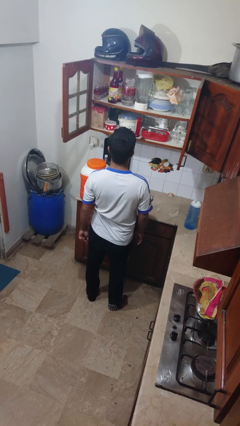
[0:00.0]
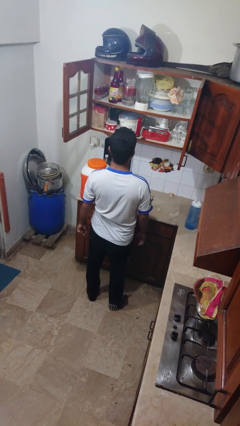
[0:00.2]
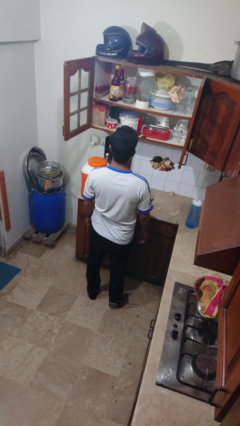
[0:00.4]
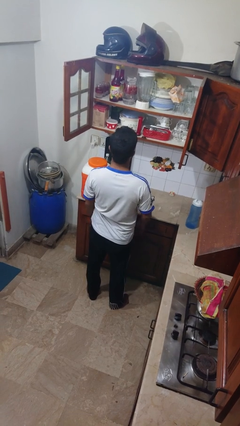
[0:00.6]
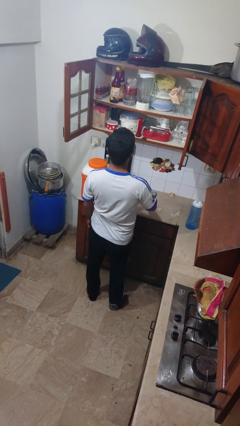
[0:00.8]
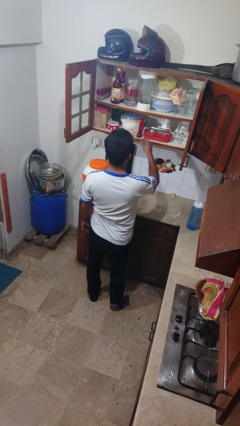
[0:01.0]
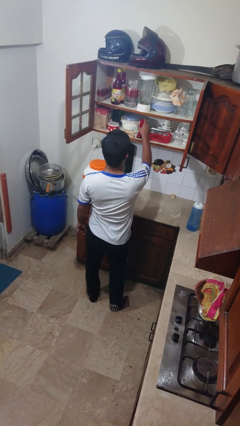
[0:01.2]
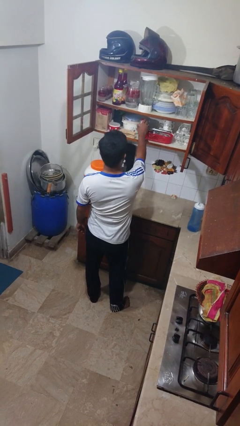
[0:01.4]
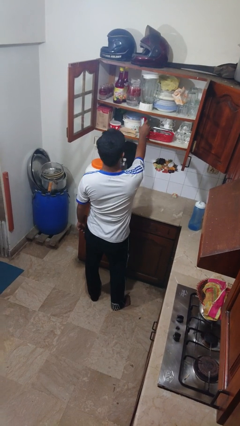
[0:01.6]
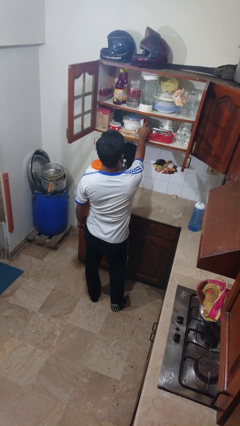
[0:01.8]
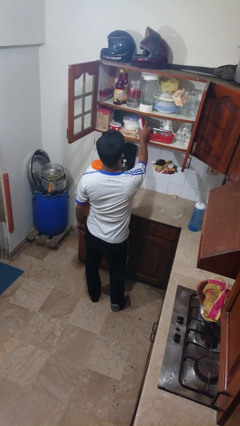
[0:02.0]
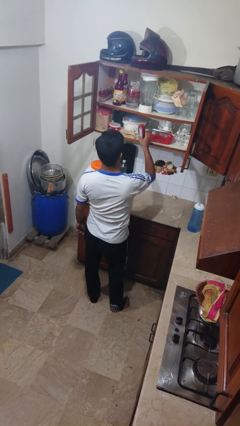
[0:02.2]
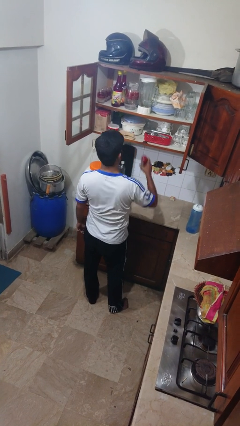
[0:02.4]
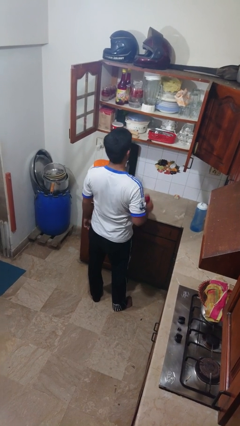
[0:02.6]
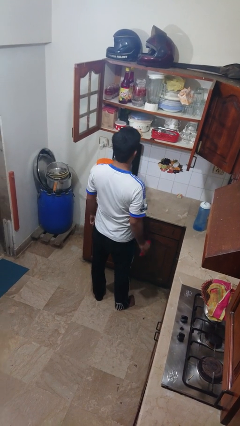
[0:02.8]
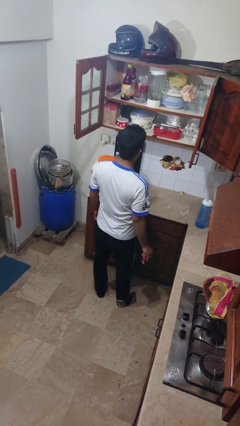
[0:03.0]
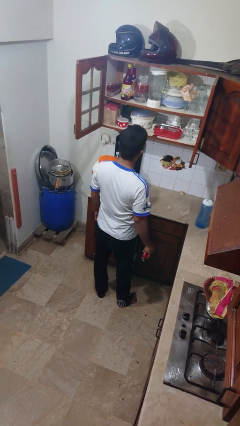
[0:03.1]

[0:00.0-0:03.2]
person picks up object from cabinet

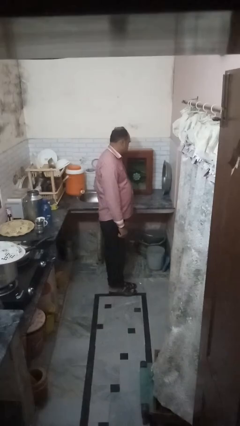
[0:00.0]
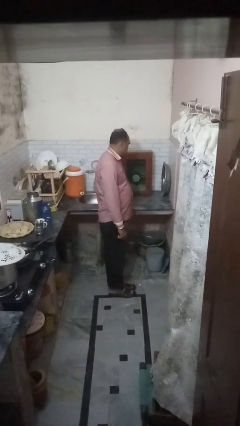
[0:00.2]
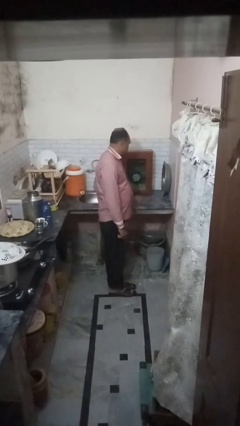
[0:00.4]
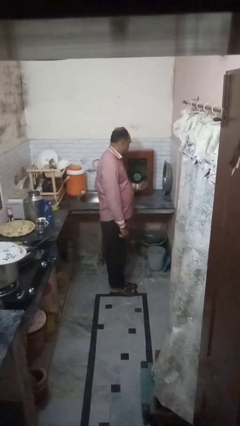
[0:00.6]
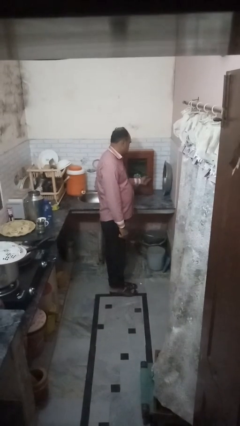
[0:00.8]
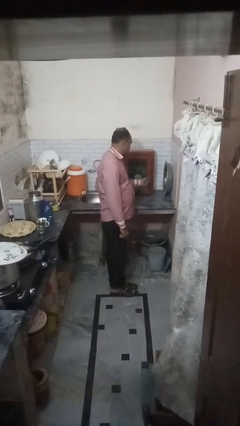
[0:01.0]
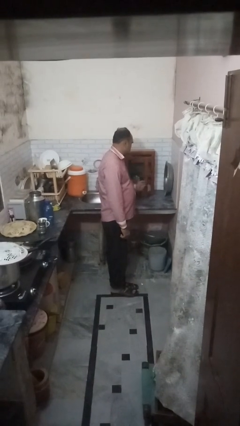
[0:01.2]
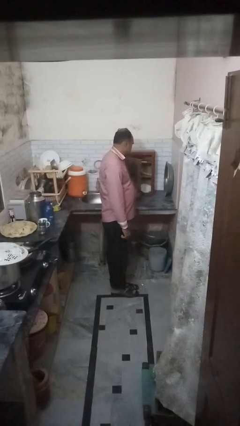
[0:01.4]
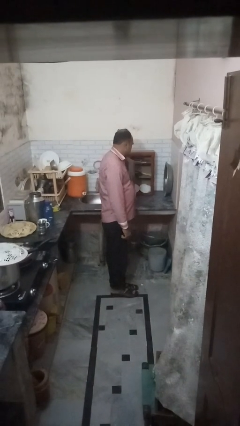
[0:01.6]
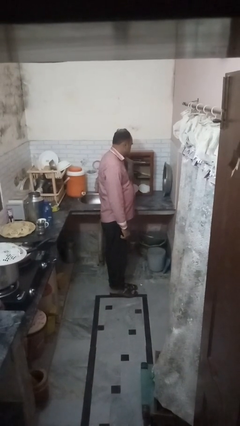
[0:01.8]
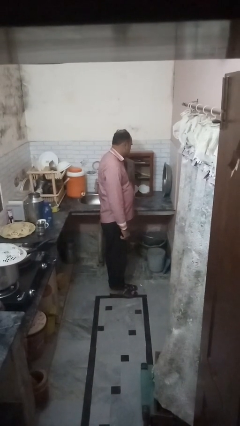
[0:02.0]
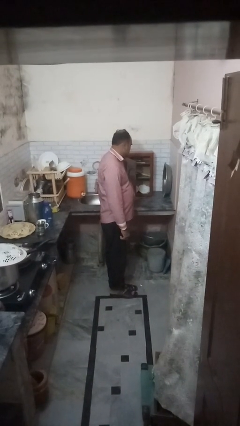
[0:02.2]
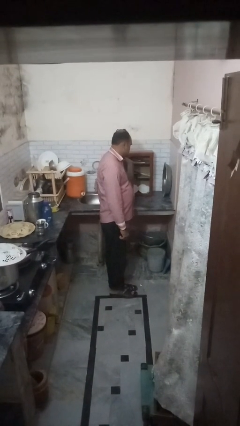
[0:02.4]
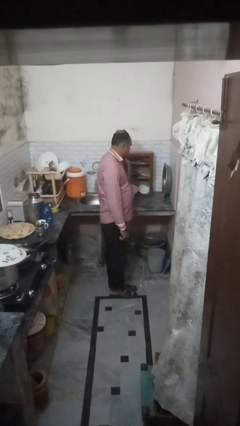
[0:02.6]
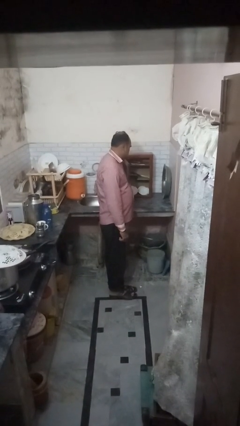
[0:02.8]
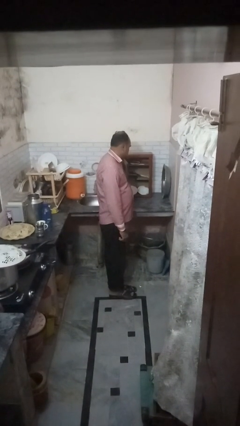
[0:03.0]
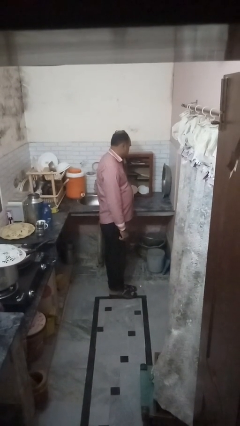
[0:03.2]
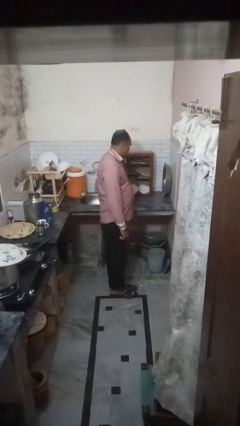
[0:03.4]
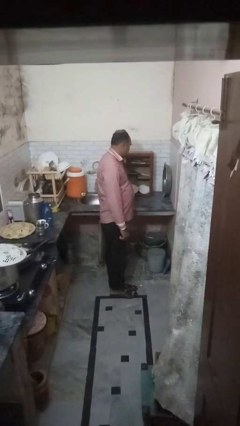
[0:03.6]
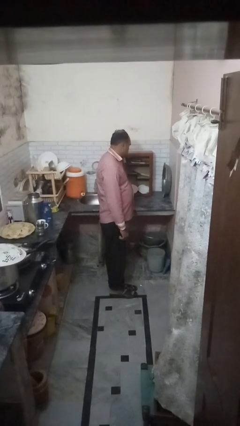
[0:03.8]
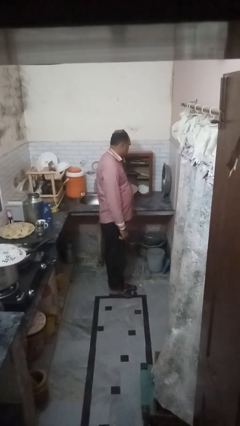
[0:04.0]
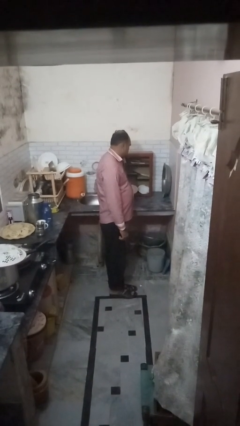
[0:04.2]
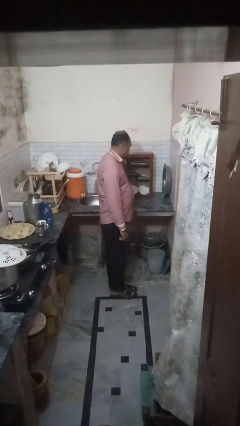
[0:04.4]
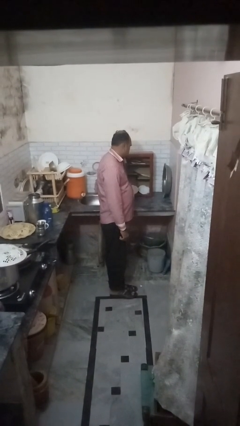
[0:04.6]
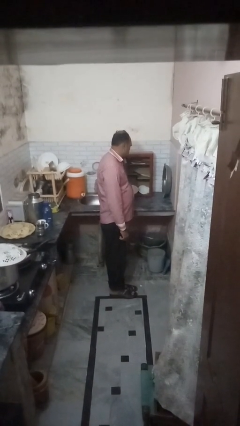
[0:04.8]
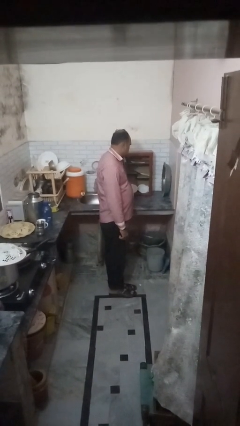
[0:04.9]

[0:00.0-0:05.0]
person opens cabinet

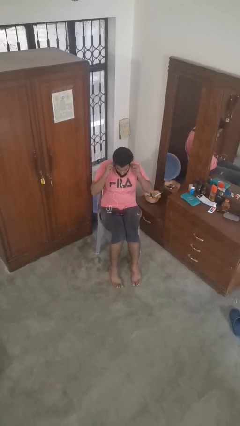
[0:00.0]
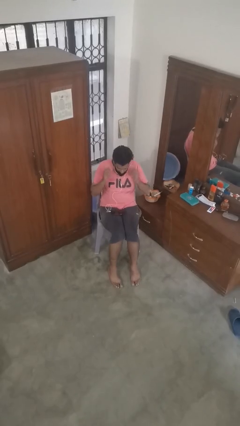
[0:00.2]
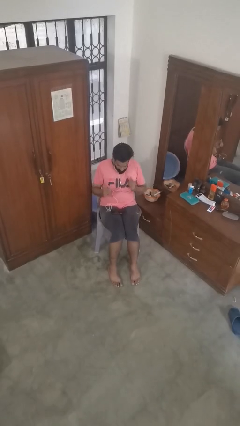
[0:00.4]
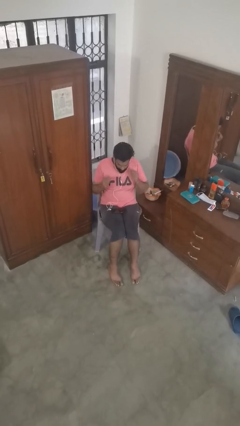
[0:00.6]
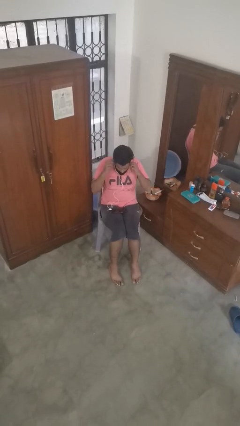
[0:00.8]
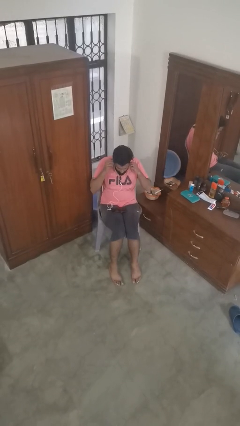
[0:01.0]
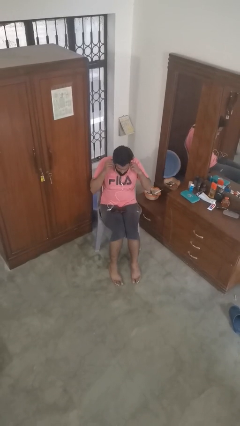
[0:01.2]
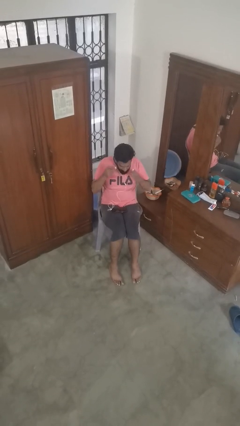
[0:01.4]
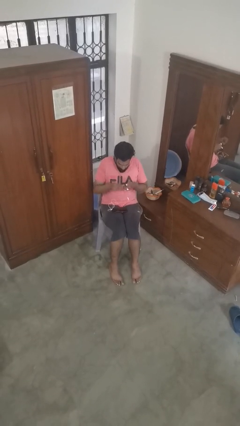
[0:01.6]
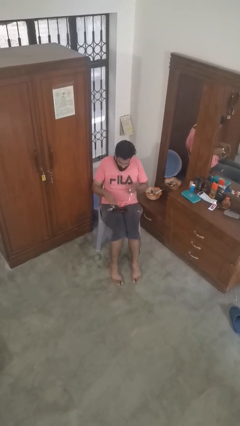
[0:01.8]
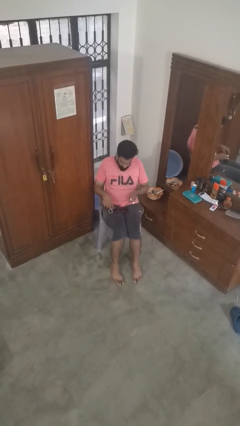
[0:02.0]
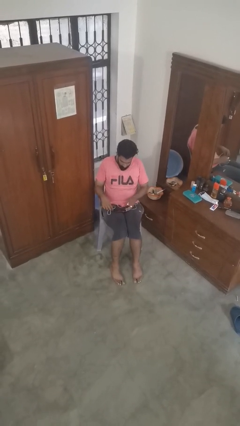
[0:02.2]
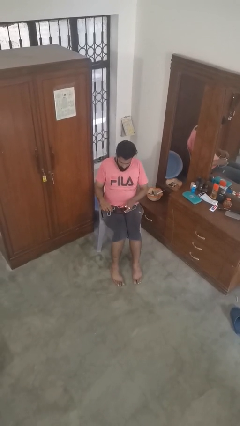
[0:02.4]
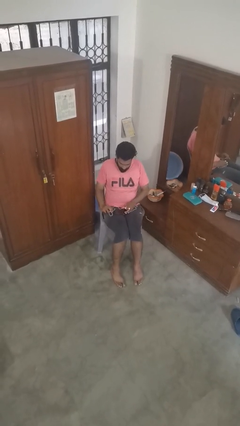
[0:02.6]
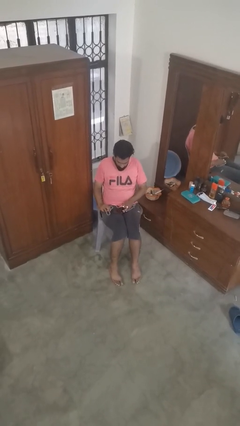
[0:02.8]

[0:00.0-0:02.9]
person takes off headphones

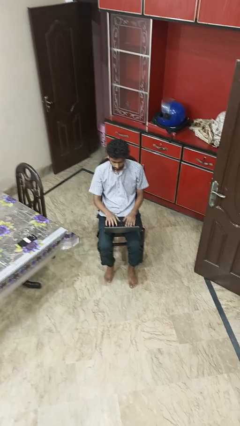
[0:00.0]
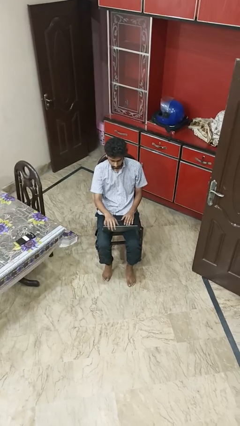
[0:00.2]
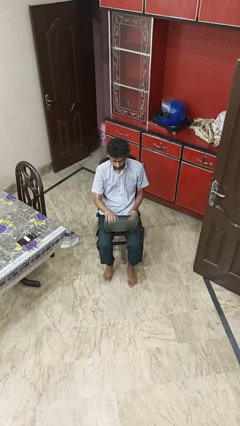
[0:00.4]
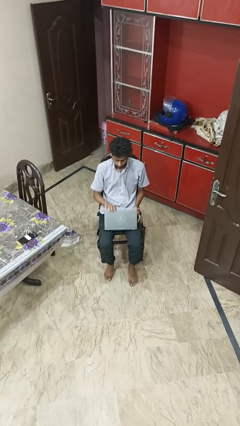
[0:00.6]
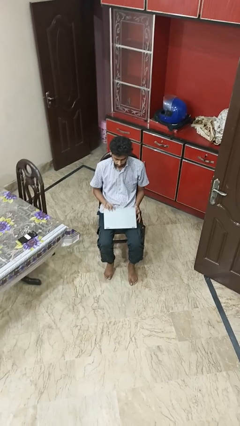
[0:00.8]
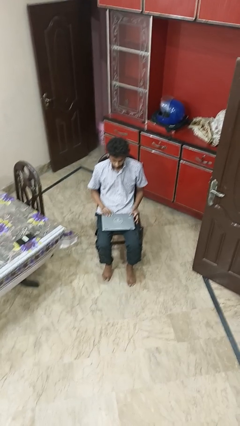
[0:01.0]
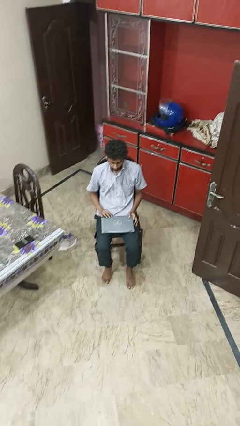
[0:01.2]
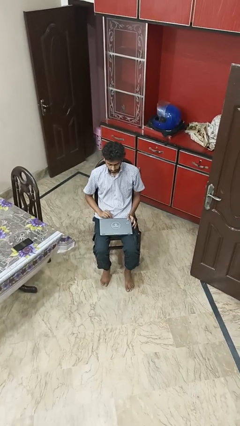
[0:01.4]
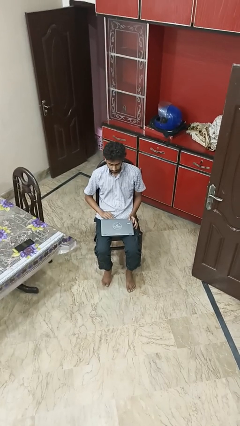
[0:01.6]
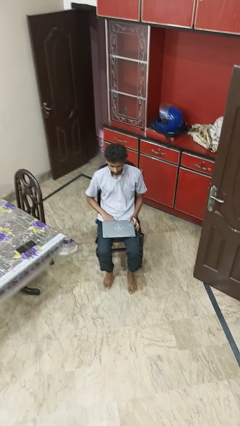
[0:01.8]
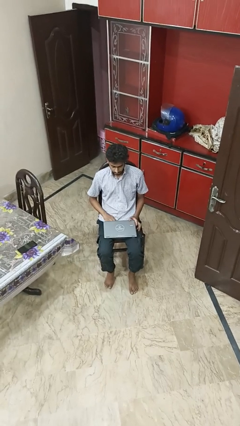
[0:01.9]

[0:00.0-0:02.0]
person closes laptop

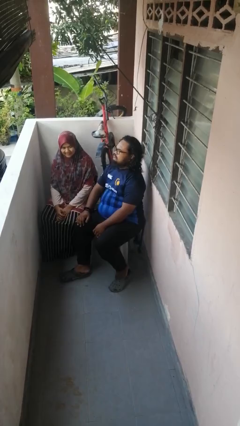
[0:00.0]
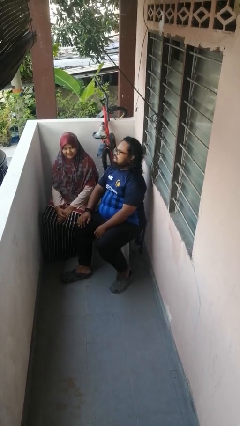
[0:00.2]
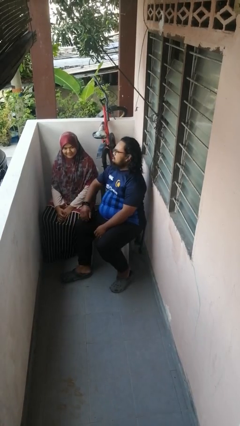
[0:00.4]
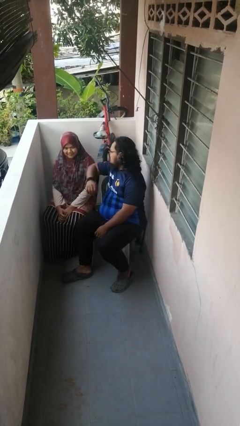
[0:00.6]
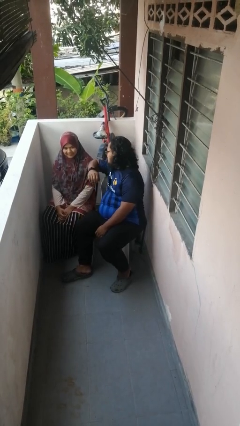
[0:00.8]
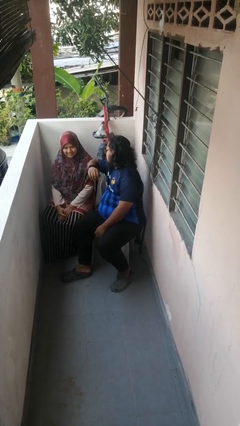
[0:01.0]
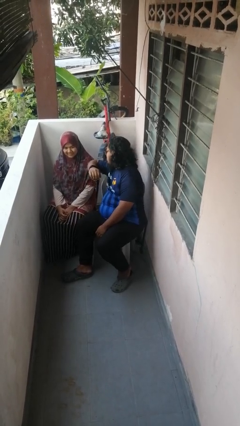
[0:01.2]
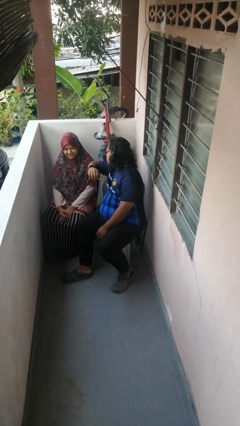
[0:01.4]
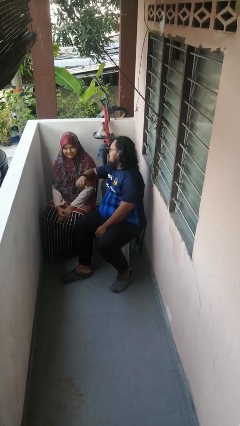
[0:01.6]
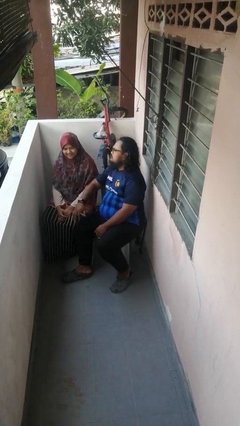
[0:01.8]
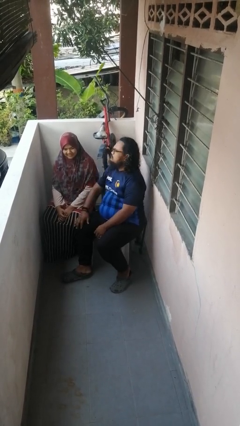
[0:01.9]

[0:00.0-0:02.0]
person nudges person with elbow

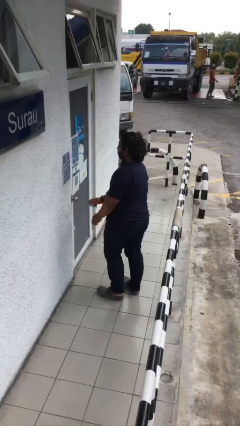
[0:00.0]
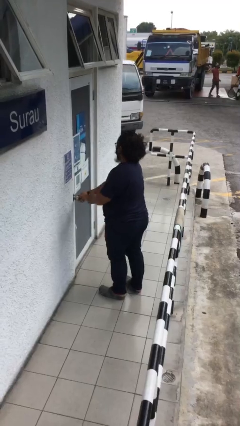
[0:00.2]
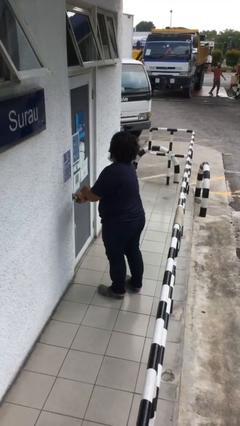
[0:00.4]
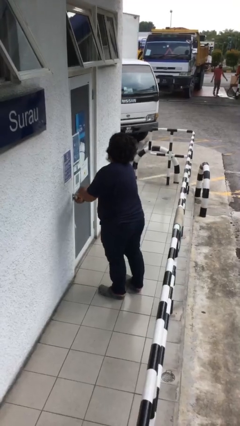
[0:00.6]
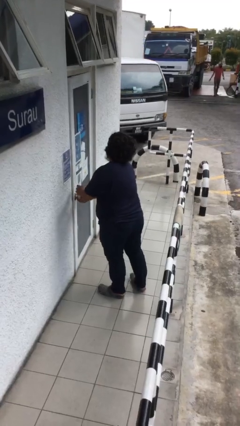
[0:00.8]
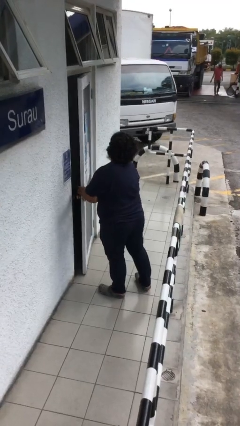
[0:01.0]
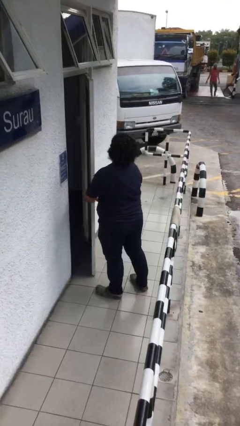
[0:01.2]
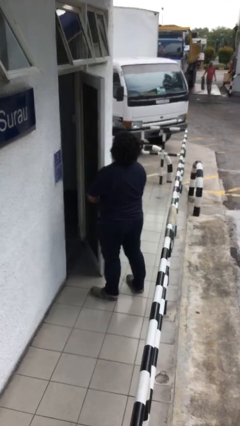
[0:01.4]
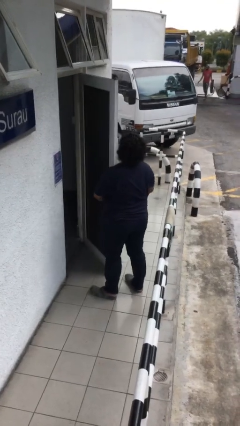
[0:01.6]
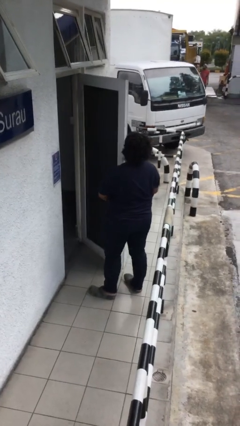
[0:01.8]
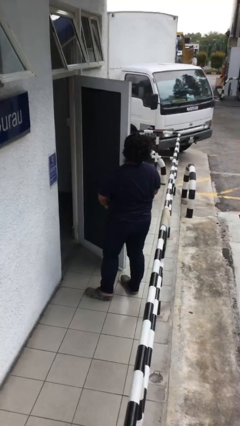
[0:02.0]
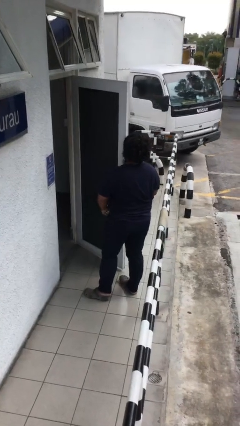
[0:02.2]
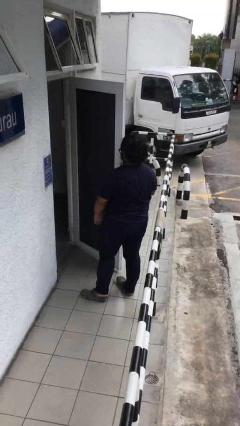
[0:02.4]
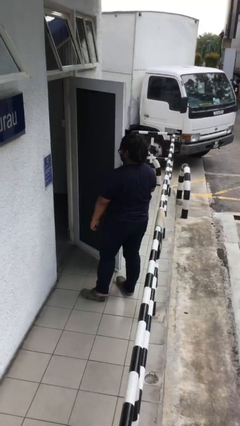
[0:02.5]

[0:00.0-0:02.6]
person opens facility door
